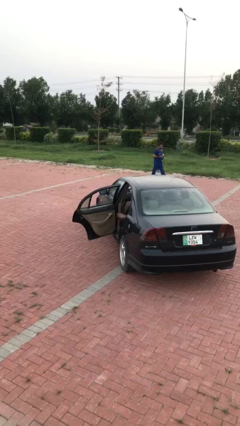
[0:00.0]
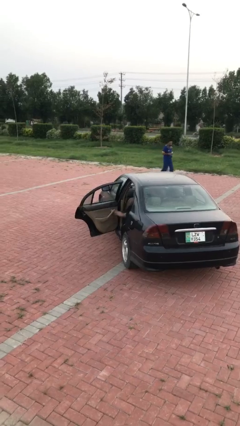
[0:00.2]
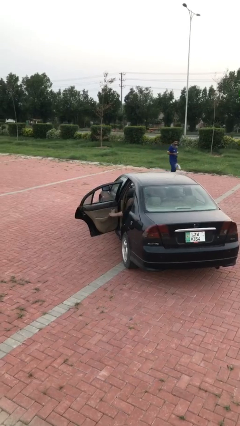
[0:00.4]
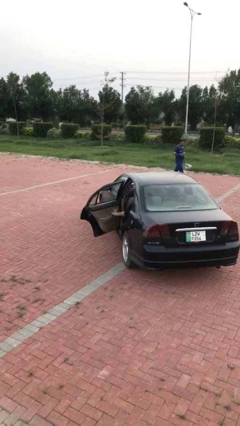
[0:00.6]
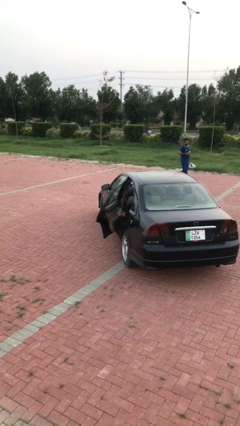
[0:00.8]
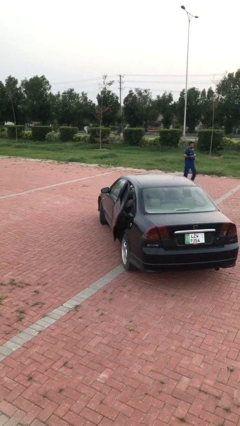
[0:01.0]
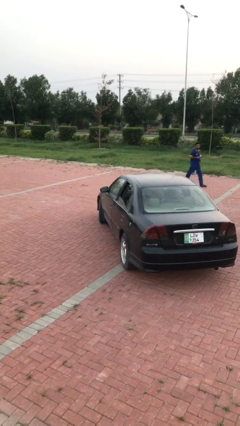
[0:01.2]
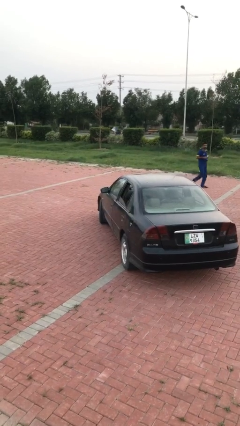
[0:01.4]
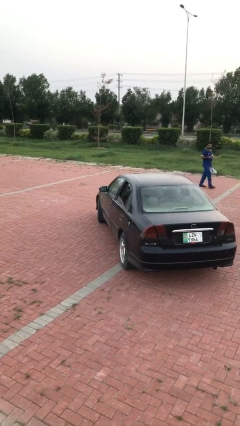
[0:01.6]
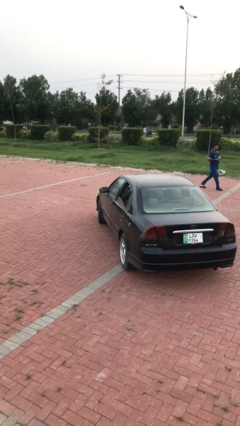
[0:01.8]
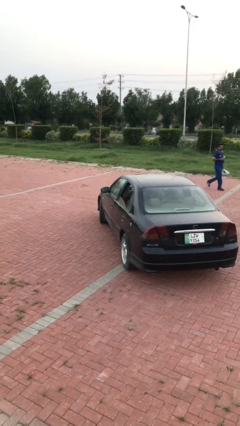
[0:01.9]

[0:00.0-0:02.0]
person closes car door

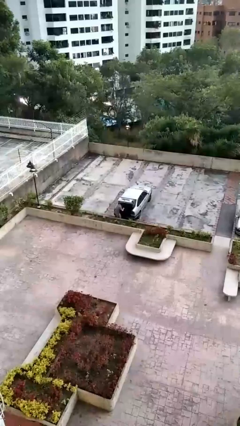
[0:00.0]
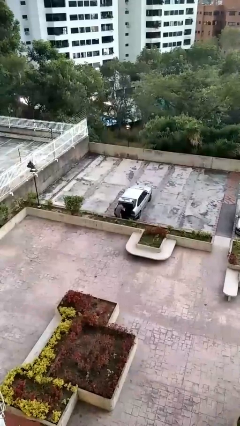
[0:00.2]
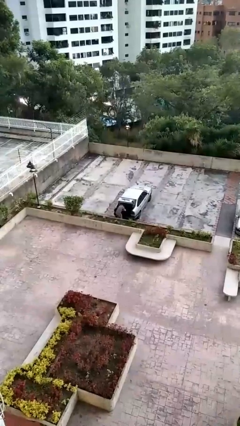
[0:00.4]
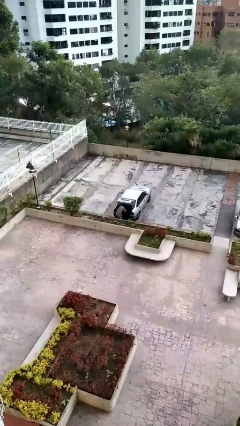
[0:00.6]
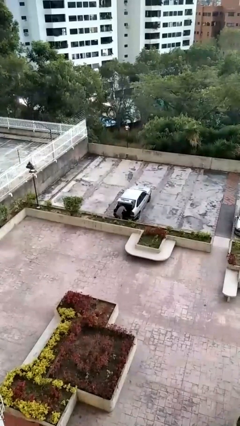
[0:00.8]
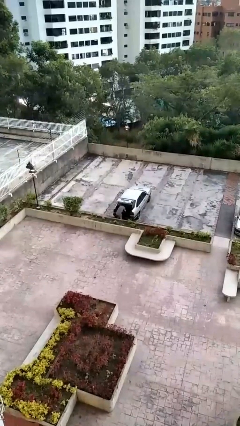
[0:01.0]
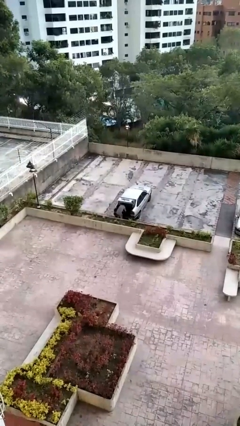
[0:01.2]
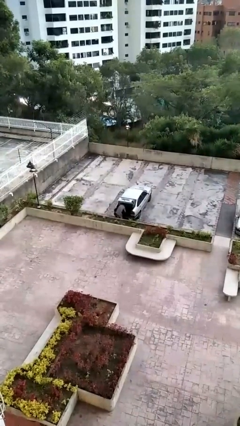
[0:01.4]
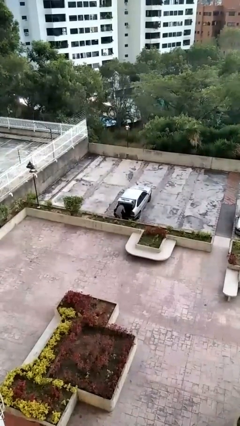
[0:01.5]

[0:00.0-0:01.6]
person loads car

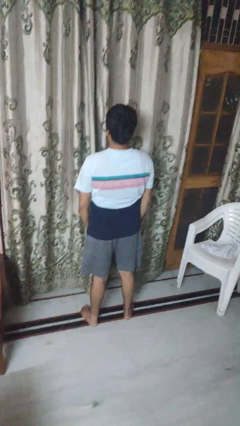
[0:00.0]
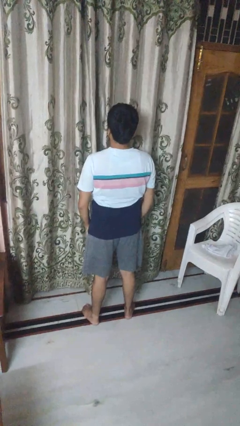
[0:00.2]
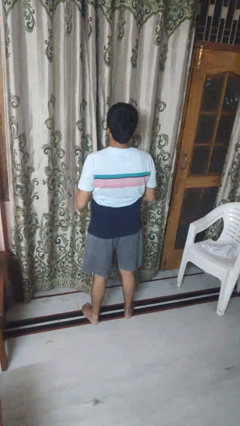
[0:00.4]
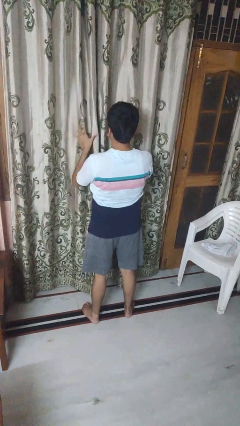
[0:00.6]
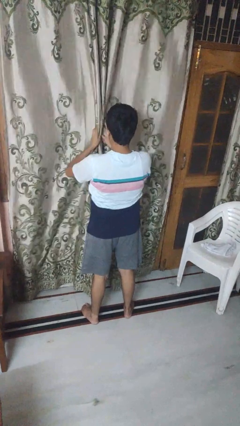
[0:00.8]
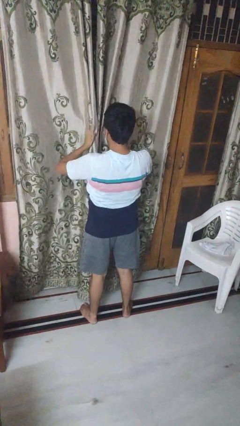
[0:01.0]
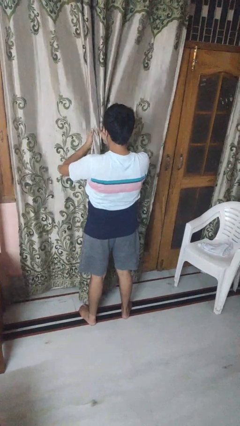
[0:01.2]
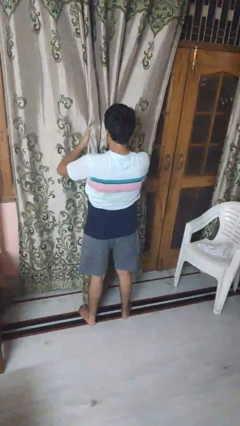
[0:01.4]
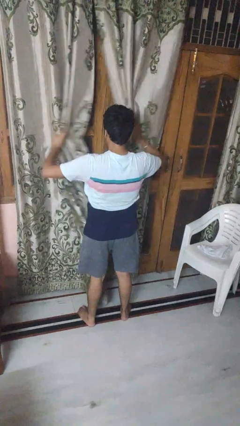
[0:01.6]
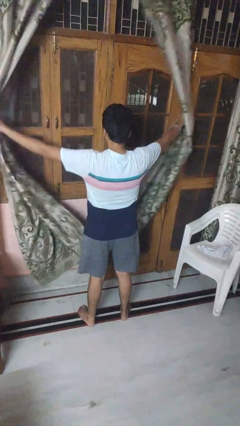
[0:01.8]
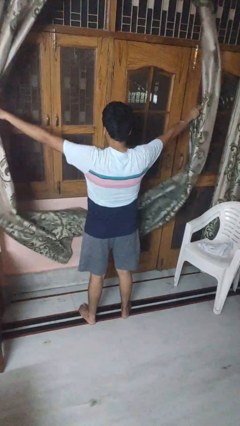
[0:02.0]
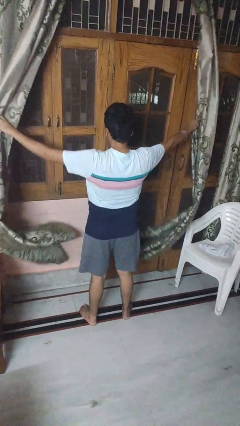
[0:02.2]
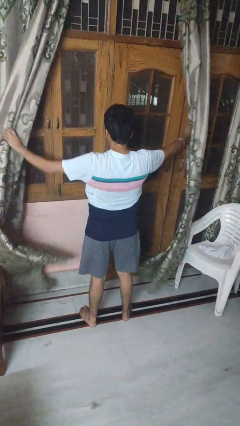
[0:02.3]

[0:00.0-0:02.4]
person opens curtains

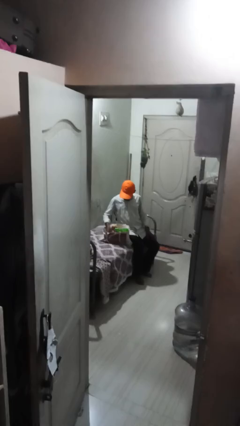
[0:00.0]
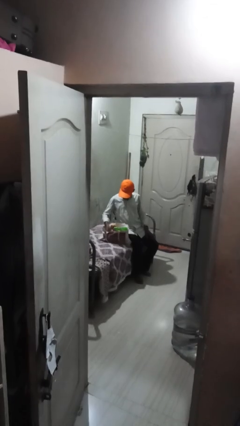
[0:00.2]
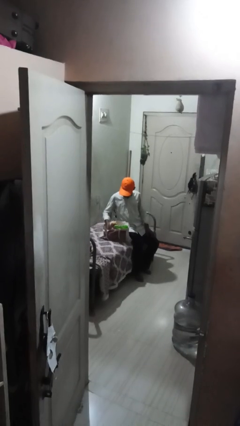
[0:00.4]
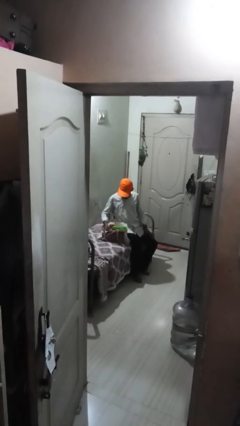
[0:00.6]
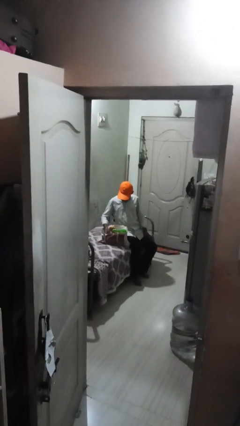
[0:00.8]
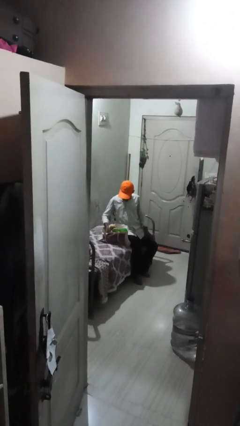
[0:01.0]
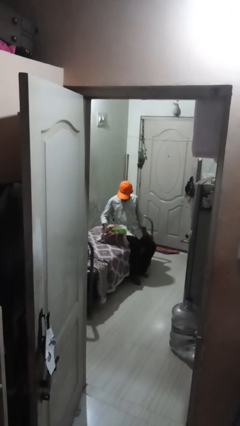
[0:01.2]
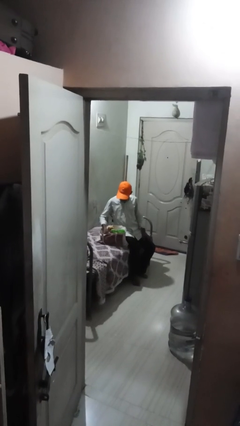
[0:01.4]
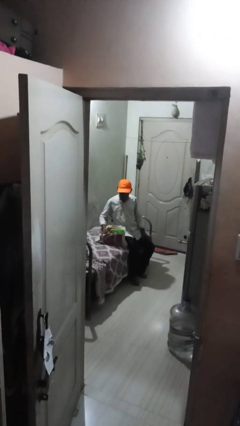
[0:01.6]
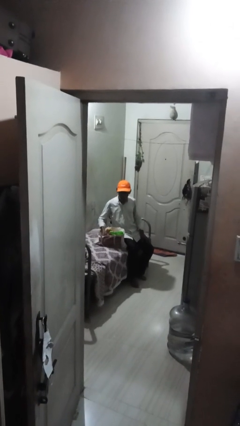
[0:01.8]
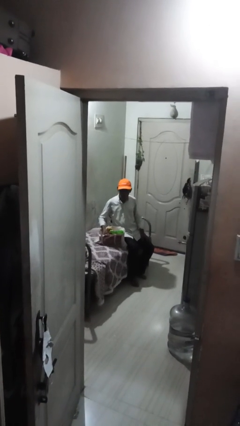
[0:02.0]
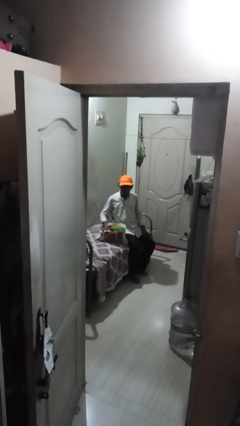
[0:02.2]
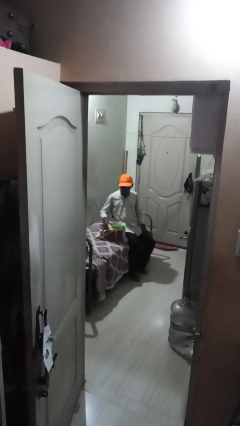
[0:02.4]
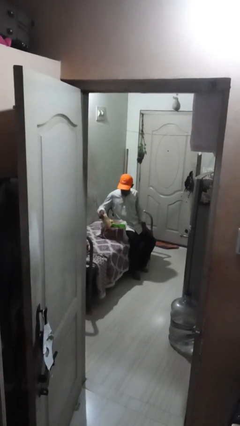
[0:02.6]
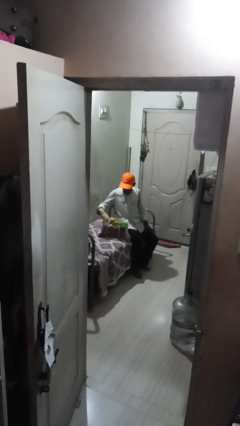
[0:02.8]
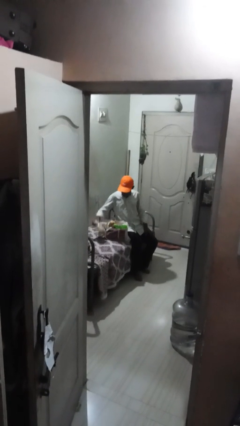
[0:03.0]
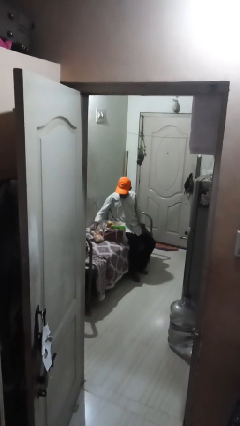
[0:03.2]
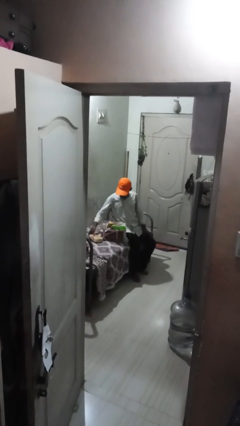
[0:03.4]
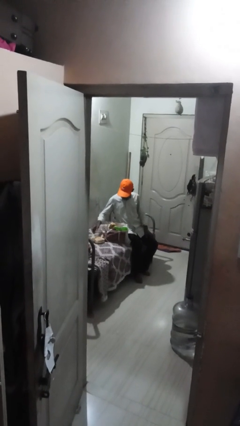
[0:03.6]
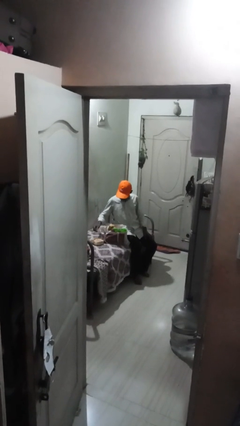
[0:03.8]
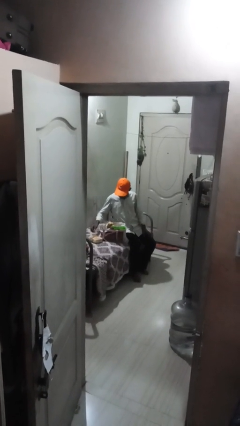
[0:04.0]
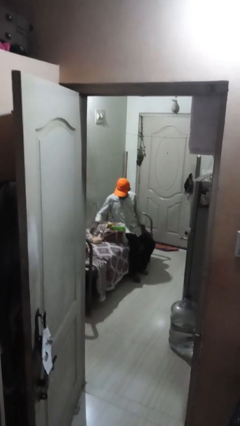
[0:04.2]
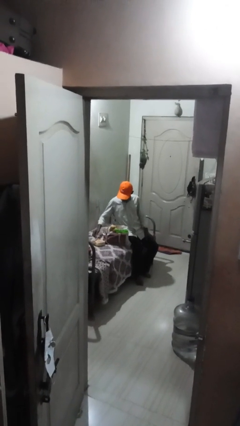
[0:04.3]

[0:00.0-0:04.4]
person takes object from bag

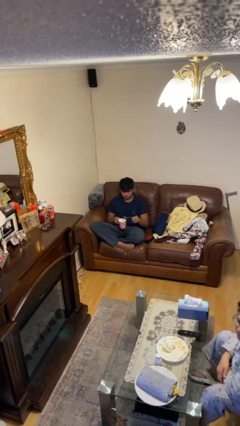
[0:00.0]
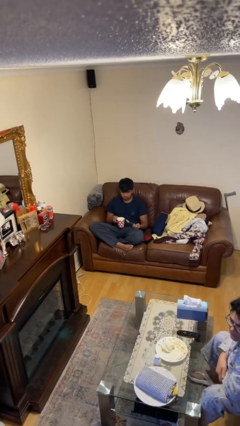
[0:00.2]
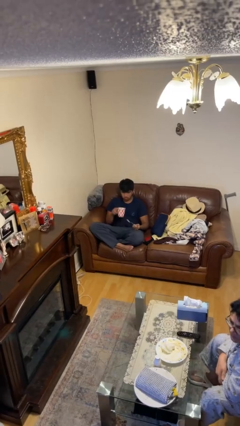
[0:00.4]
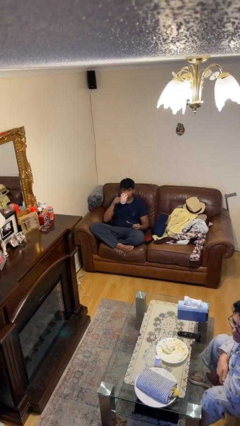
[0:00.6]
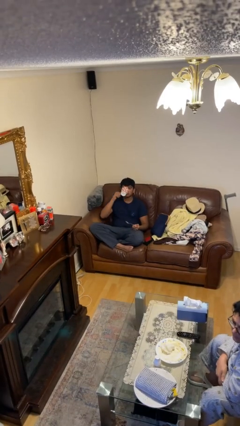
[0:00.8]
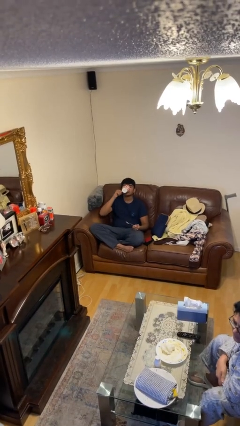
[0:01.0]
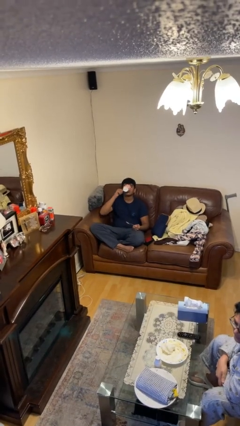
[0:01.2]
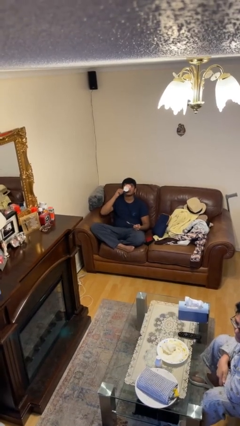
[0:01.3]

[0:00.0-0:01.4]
person drinks from mug

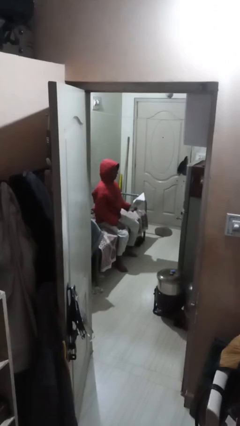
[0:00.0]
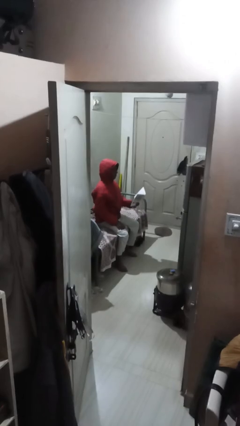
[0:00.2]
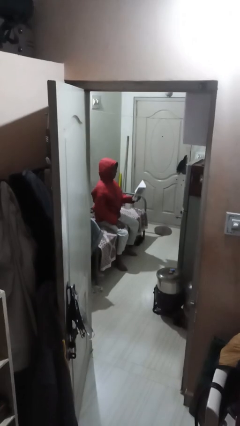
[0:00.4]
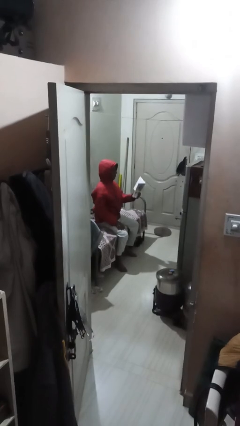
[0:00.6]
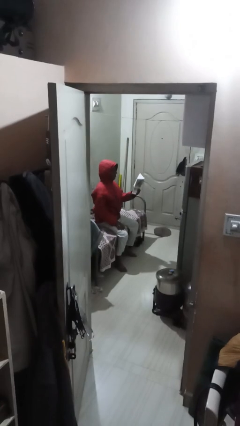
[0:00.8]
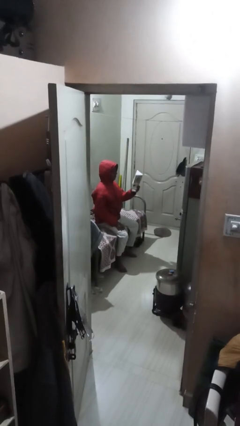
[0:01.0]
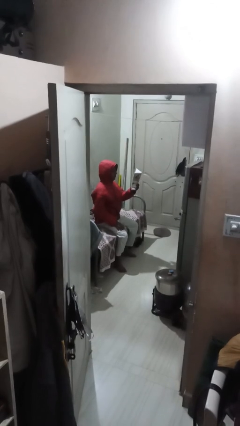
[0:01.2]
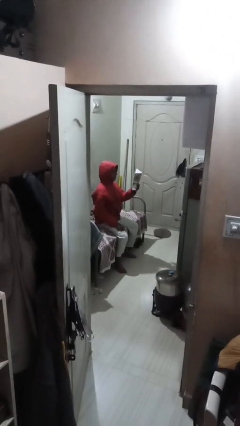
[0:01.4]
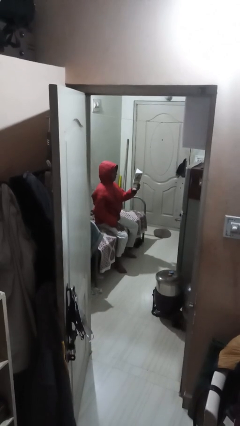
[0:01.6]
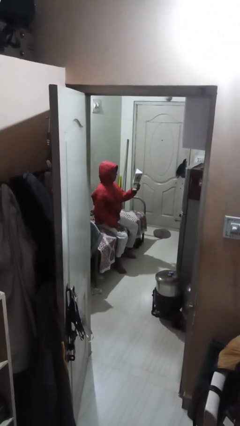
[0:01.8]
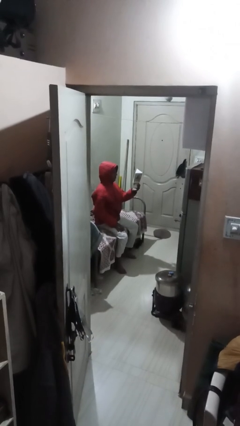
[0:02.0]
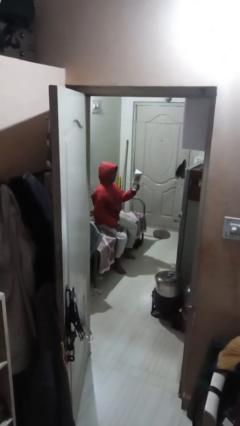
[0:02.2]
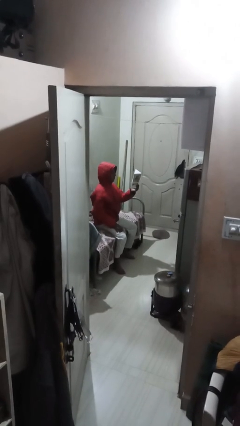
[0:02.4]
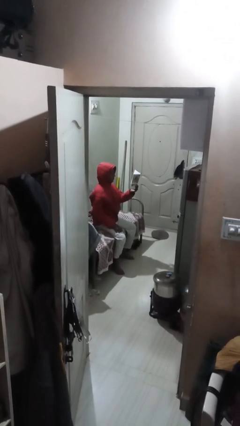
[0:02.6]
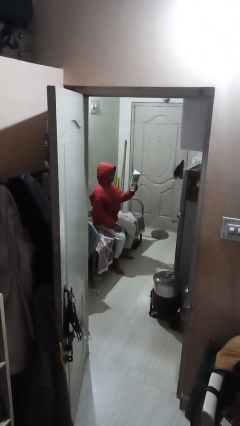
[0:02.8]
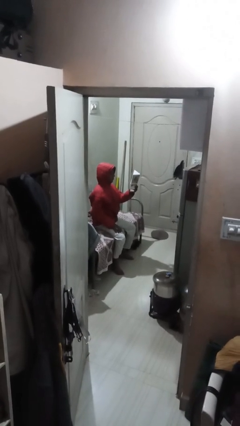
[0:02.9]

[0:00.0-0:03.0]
person reads document

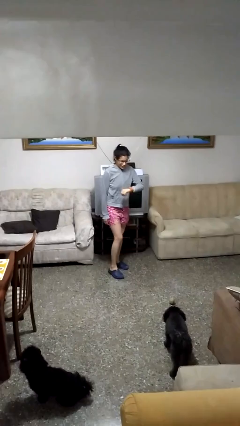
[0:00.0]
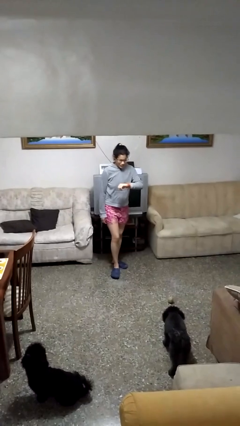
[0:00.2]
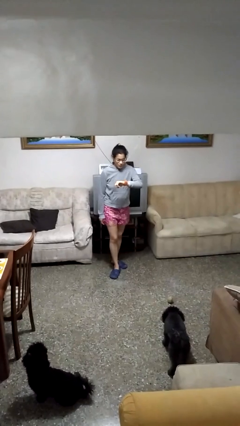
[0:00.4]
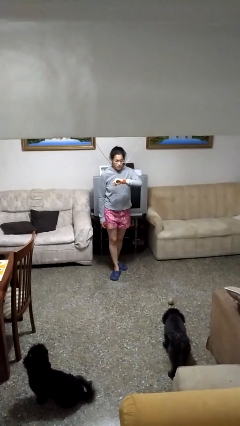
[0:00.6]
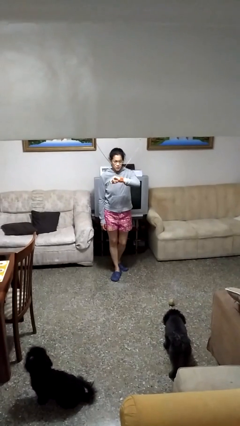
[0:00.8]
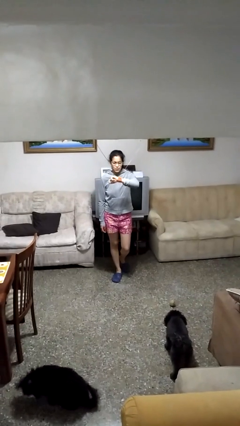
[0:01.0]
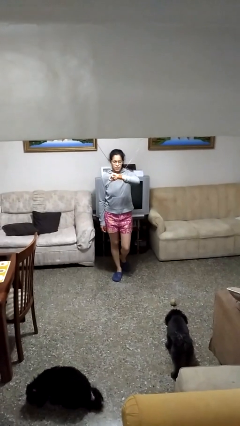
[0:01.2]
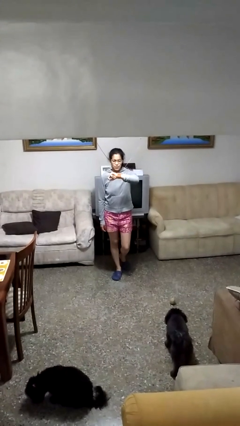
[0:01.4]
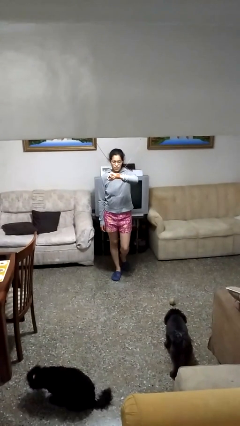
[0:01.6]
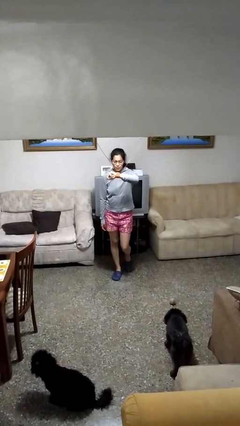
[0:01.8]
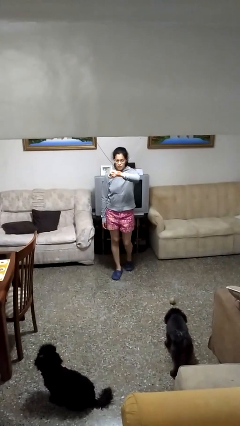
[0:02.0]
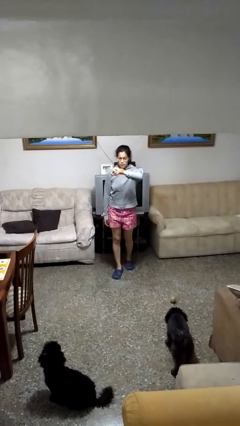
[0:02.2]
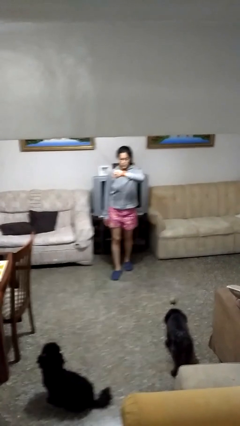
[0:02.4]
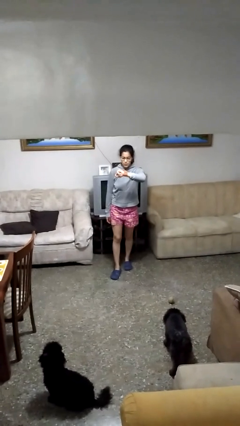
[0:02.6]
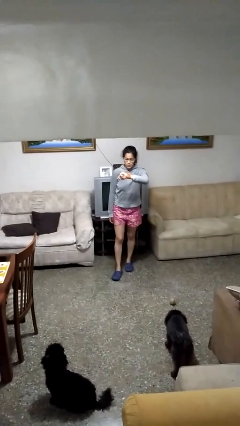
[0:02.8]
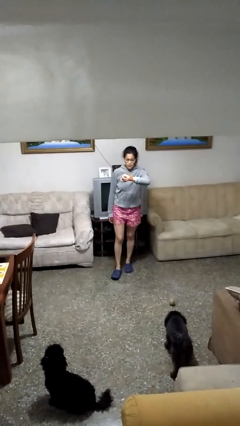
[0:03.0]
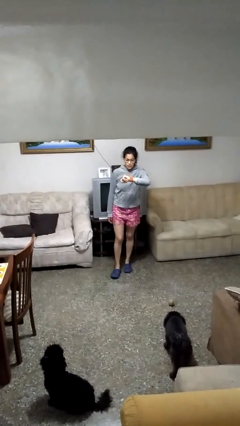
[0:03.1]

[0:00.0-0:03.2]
person looks at wristwatch
